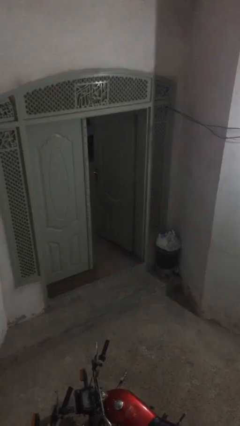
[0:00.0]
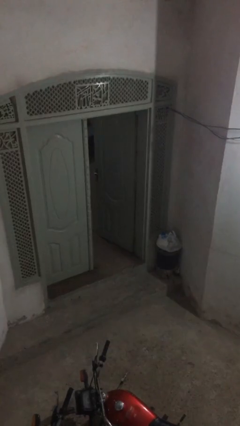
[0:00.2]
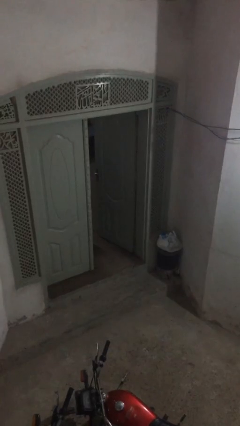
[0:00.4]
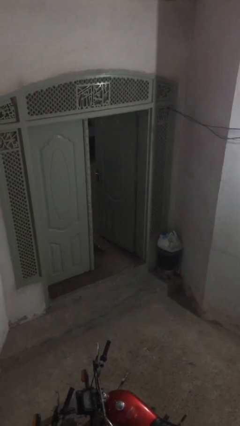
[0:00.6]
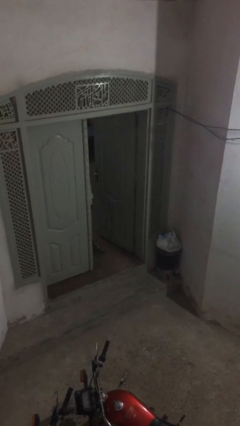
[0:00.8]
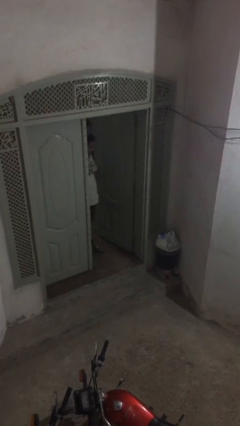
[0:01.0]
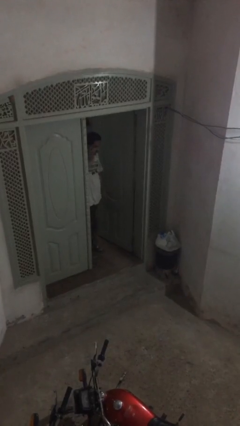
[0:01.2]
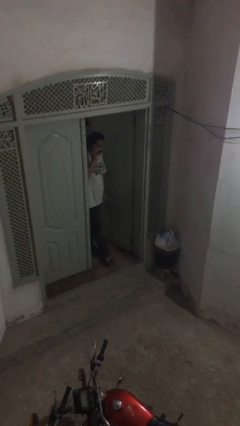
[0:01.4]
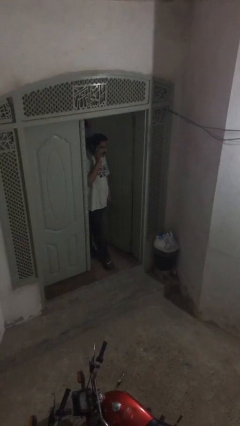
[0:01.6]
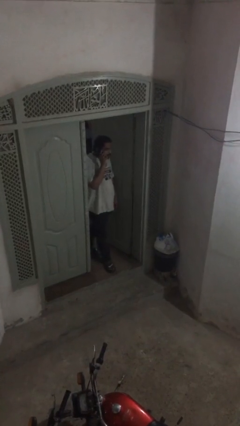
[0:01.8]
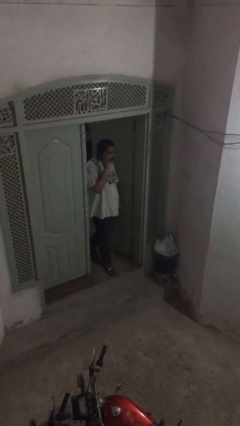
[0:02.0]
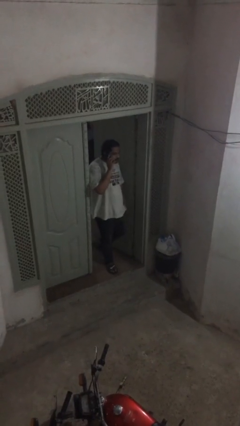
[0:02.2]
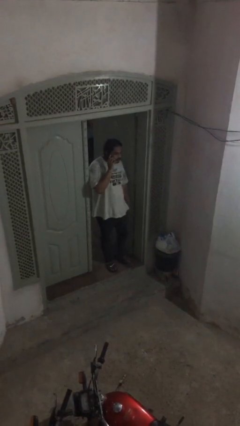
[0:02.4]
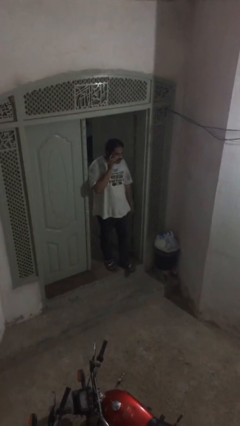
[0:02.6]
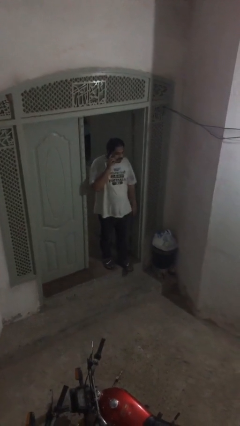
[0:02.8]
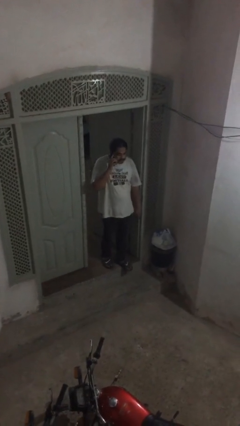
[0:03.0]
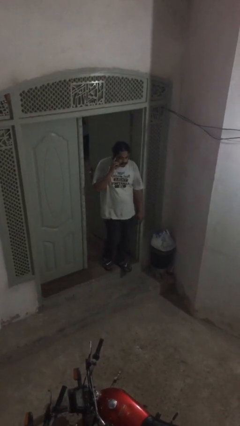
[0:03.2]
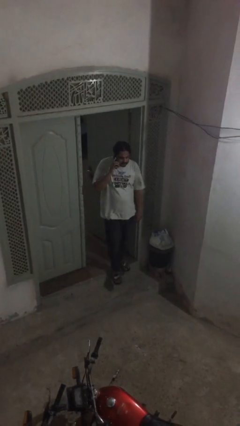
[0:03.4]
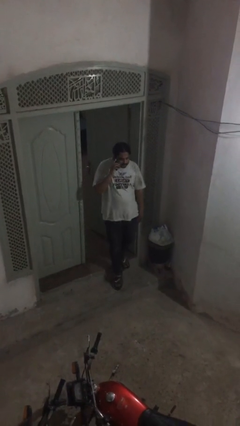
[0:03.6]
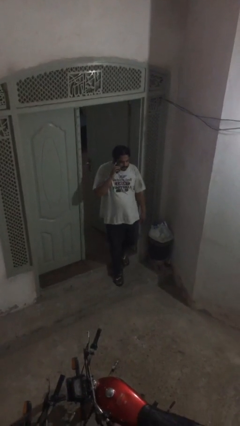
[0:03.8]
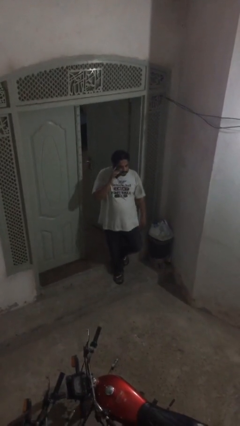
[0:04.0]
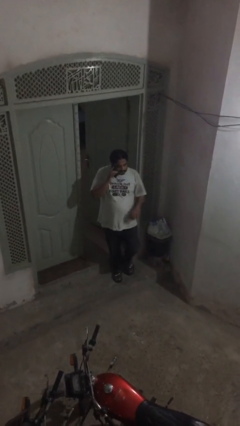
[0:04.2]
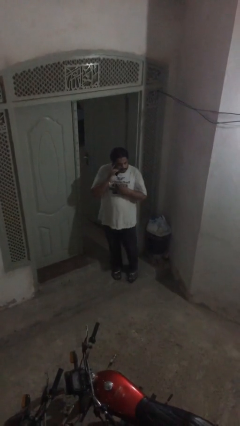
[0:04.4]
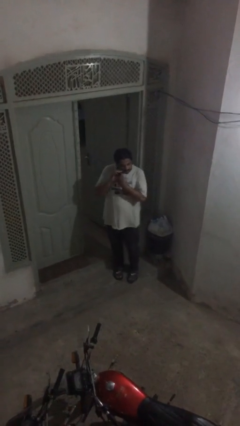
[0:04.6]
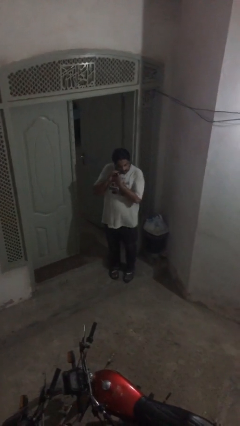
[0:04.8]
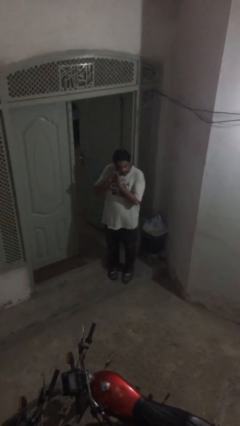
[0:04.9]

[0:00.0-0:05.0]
person enters scene through structure

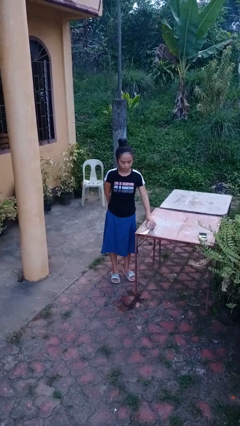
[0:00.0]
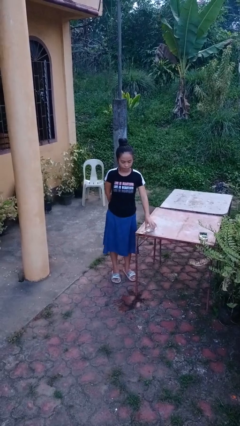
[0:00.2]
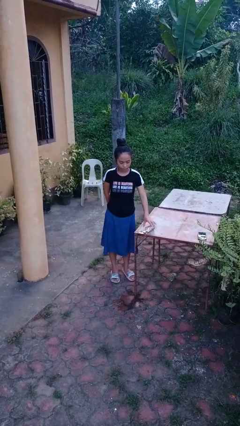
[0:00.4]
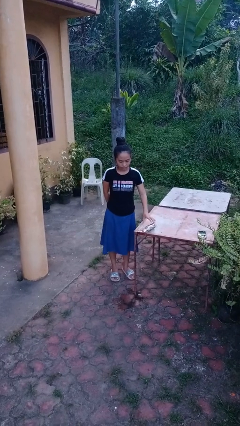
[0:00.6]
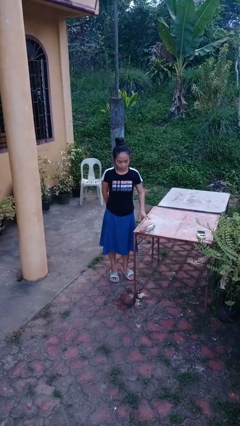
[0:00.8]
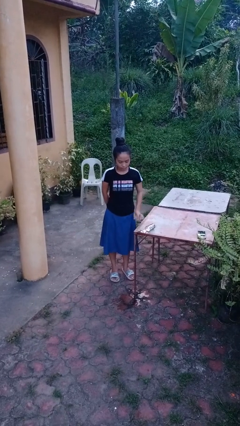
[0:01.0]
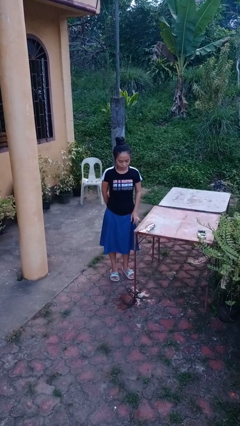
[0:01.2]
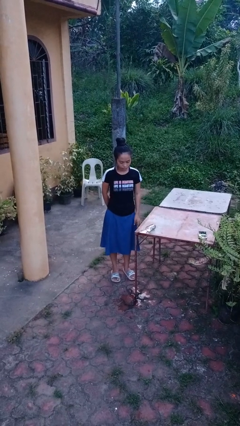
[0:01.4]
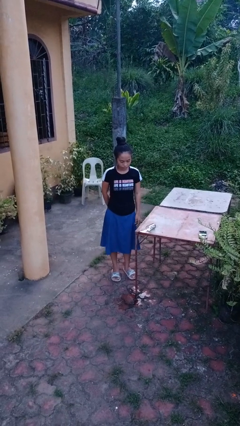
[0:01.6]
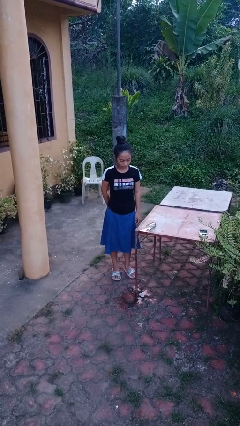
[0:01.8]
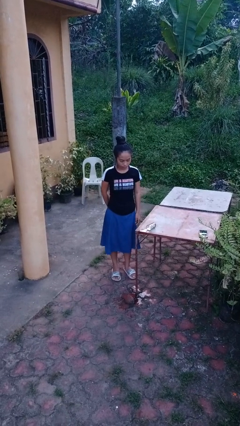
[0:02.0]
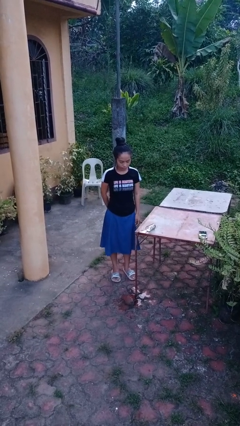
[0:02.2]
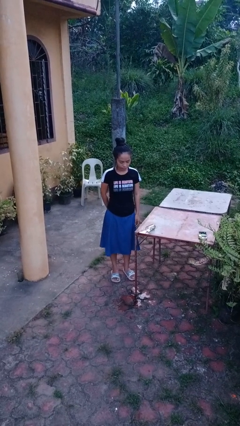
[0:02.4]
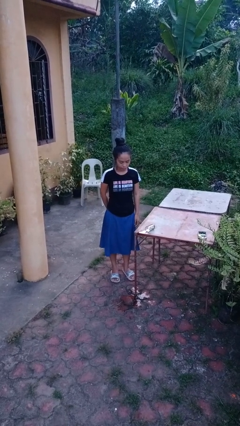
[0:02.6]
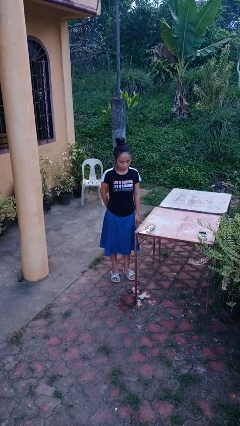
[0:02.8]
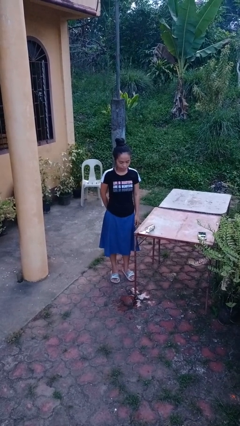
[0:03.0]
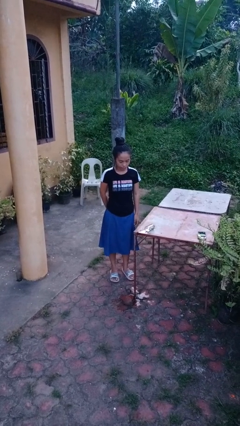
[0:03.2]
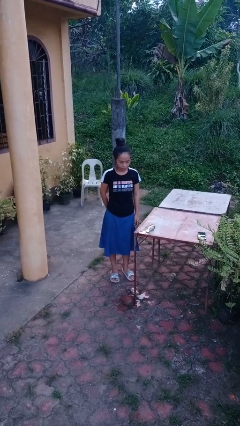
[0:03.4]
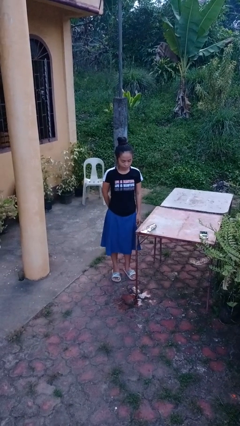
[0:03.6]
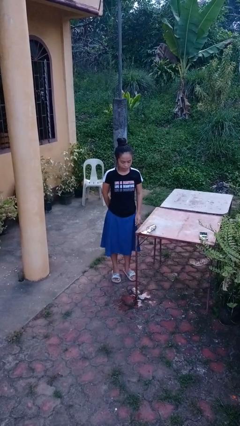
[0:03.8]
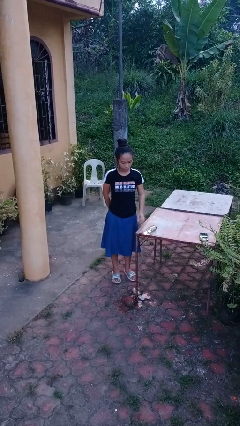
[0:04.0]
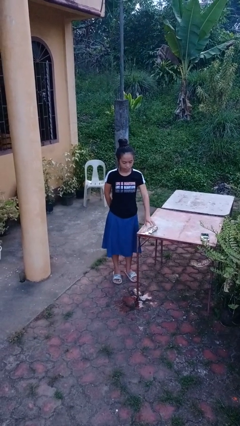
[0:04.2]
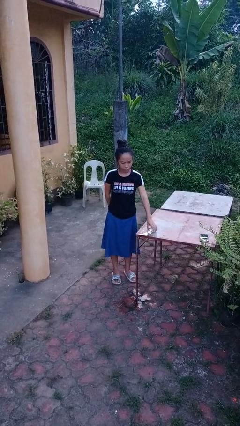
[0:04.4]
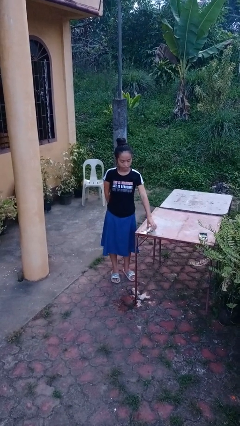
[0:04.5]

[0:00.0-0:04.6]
person spills on table

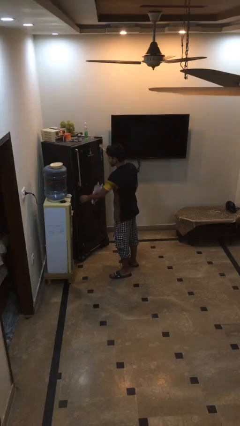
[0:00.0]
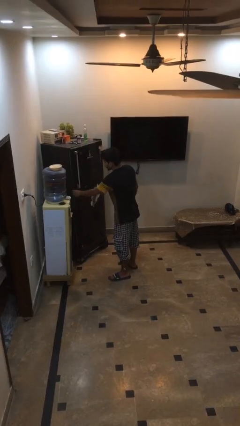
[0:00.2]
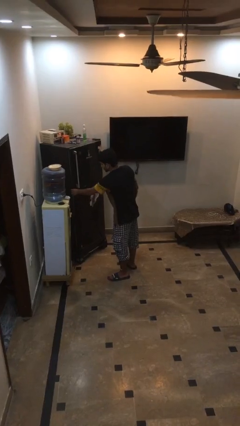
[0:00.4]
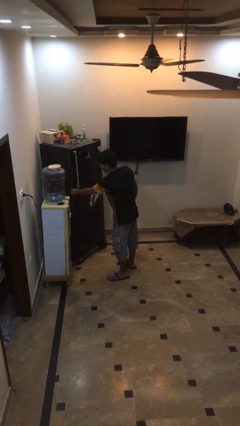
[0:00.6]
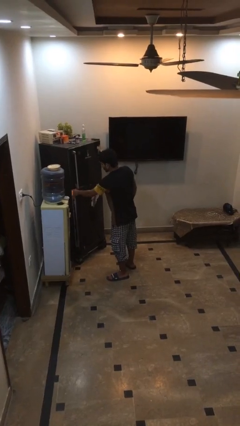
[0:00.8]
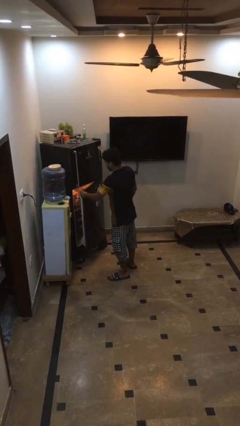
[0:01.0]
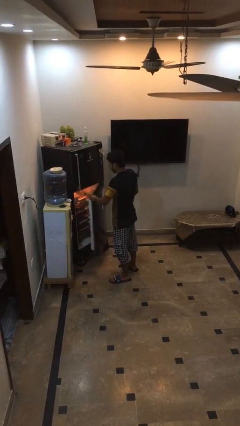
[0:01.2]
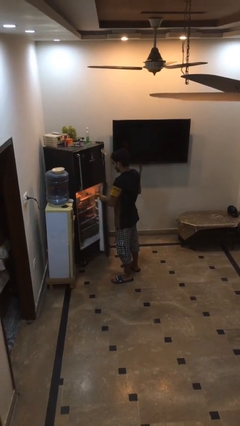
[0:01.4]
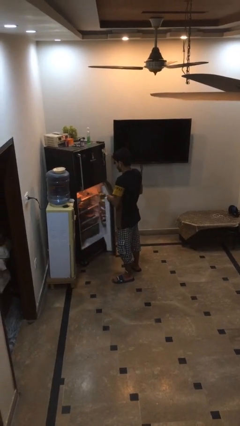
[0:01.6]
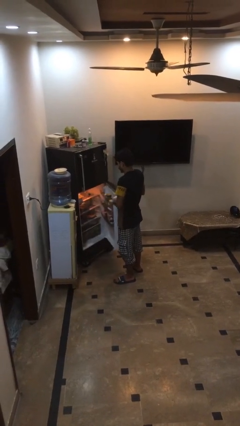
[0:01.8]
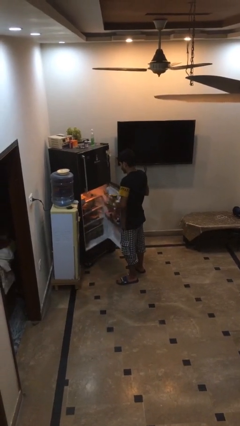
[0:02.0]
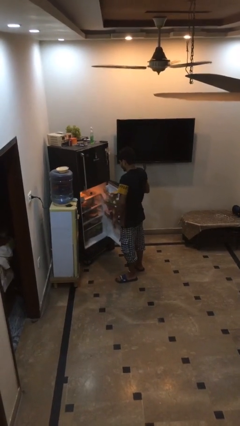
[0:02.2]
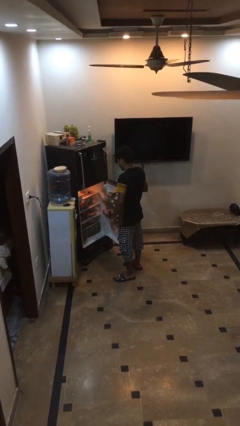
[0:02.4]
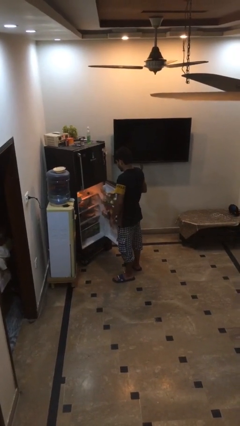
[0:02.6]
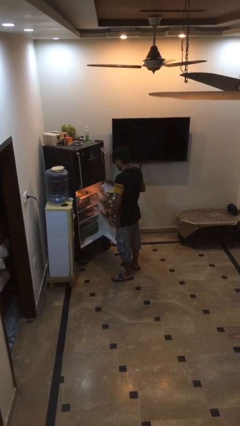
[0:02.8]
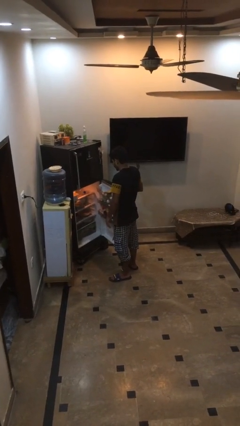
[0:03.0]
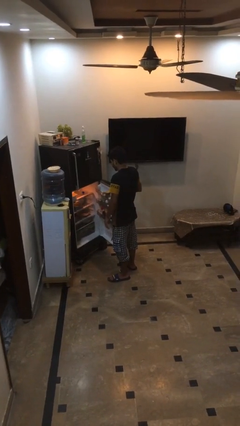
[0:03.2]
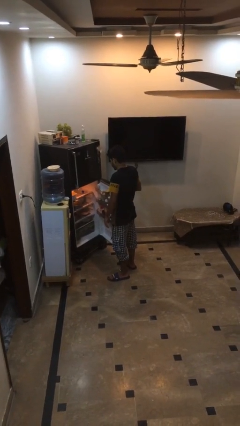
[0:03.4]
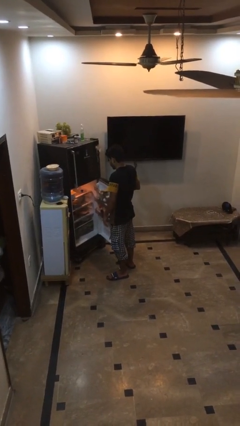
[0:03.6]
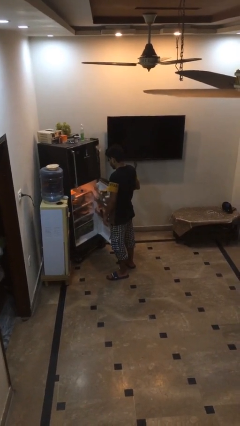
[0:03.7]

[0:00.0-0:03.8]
person opens refrigerator

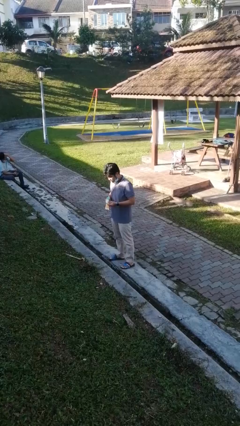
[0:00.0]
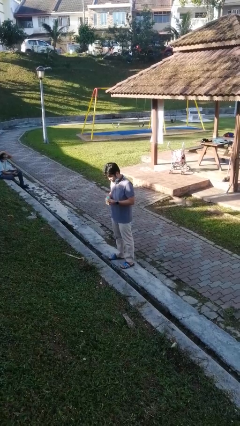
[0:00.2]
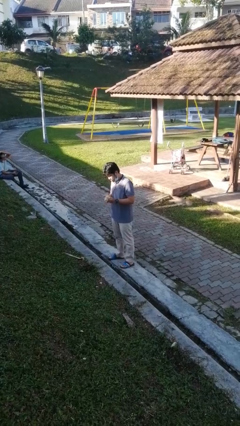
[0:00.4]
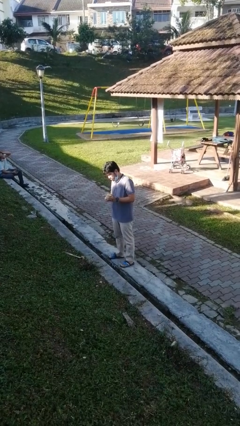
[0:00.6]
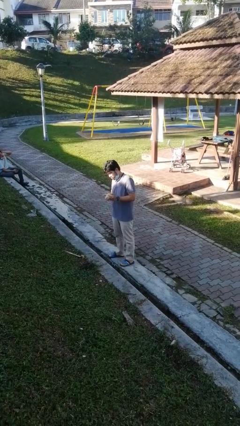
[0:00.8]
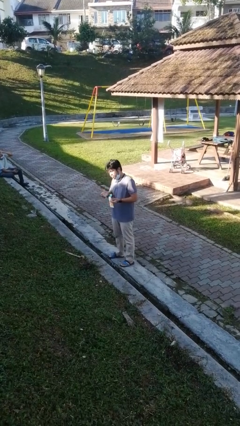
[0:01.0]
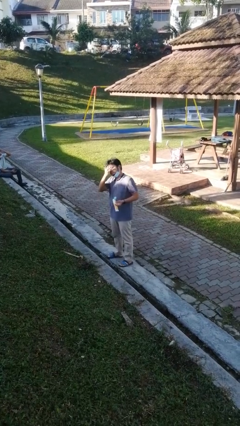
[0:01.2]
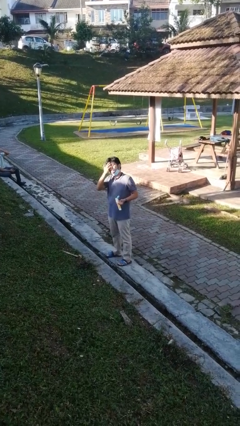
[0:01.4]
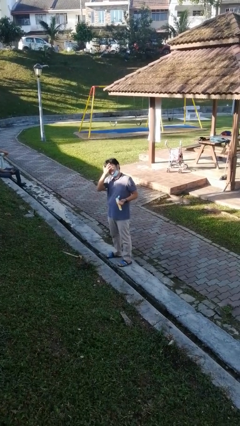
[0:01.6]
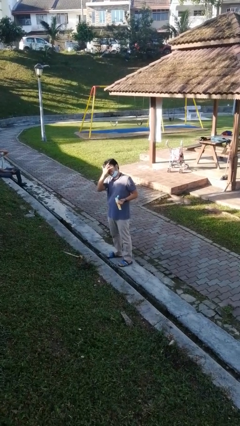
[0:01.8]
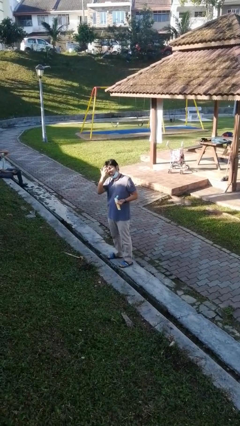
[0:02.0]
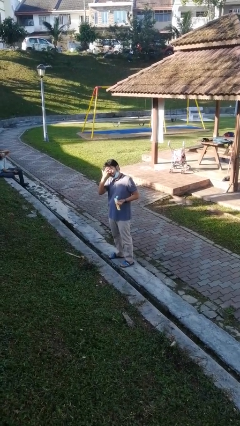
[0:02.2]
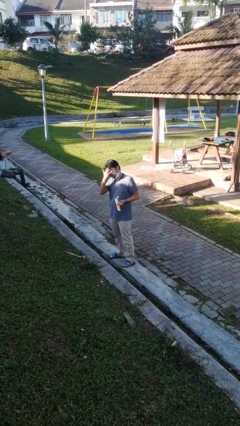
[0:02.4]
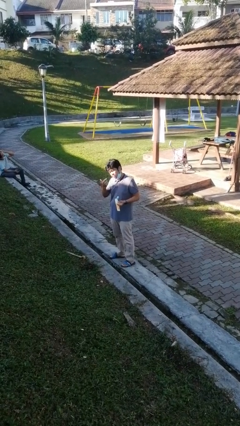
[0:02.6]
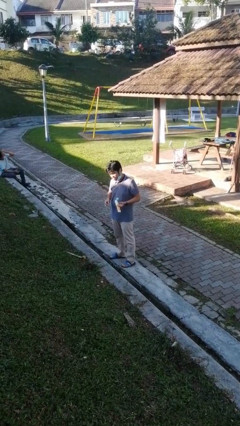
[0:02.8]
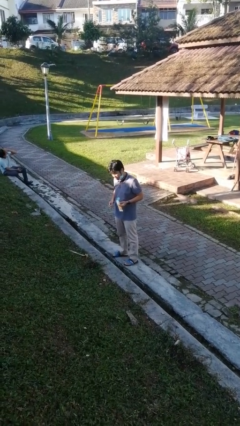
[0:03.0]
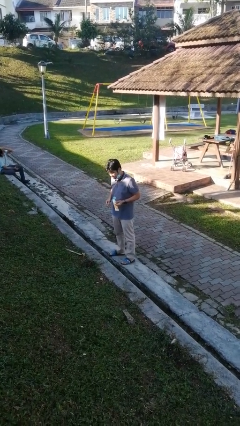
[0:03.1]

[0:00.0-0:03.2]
person applies facial moisturizer

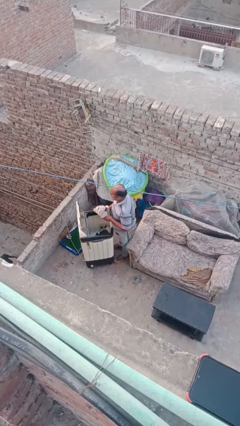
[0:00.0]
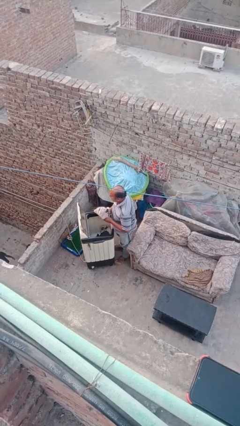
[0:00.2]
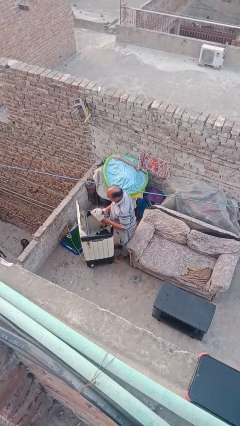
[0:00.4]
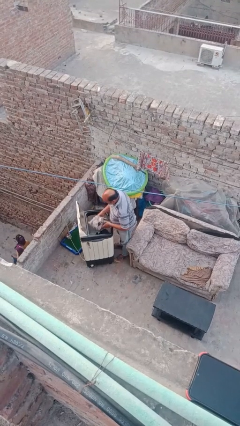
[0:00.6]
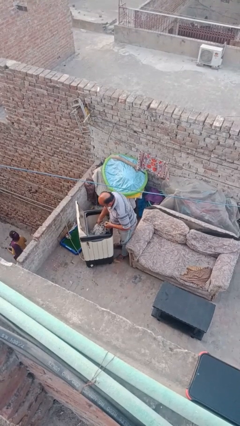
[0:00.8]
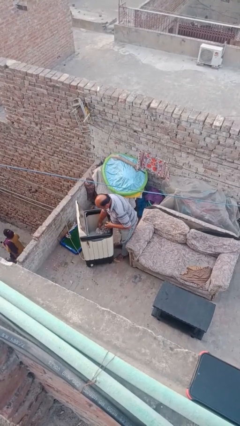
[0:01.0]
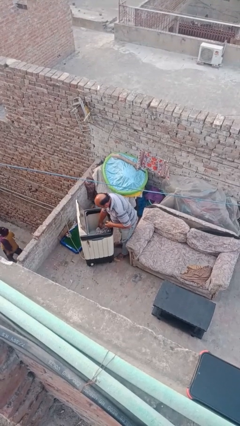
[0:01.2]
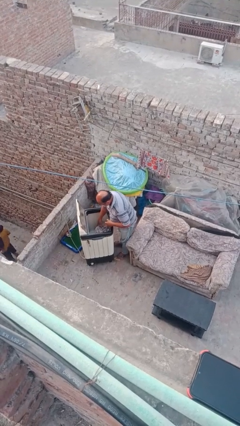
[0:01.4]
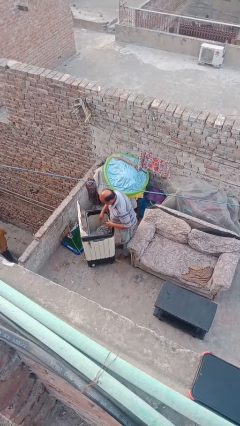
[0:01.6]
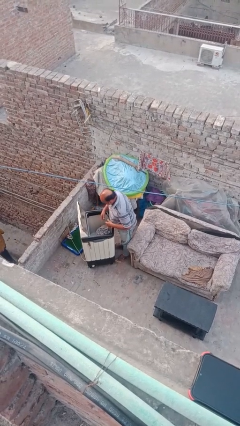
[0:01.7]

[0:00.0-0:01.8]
person loads clotheswasher
